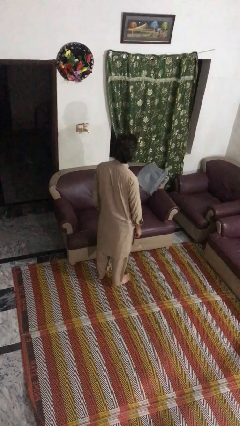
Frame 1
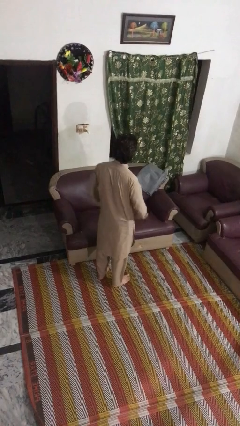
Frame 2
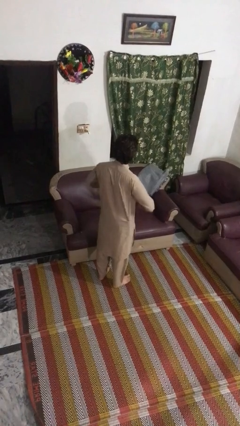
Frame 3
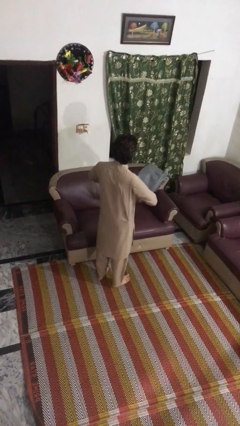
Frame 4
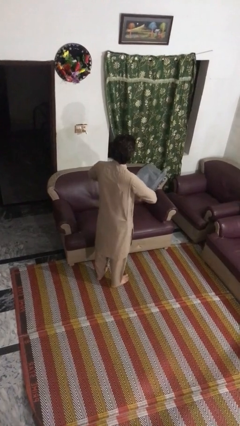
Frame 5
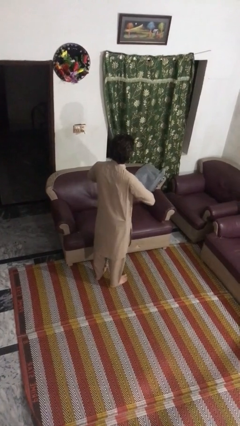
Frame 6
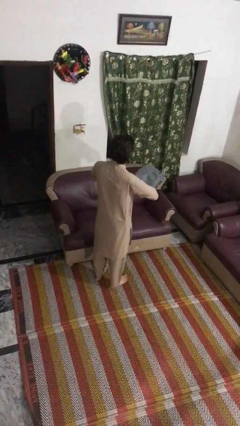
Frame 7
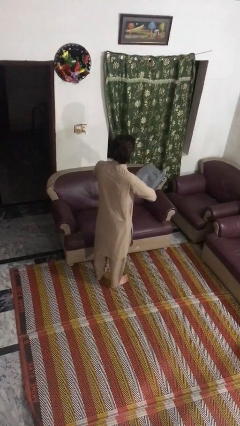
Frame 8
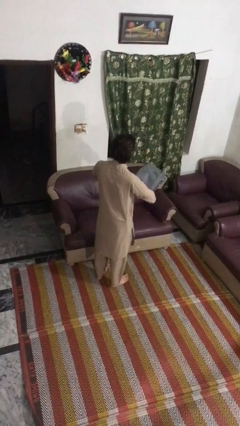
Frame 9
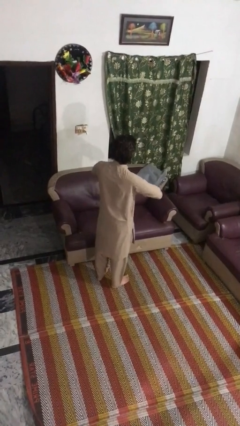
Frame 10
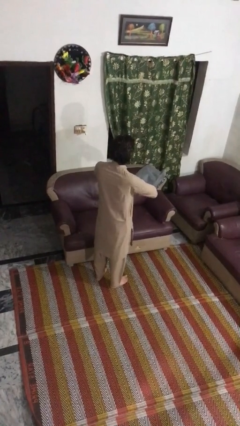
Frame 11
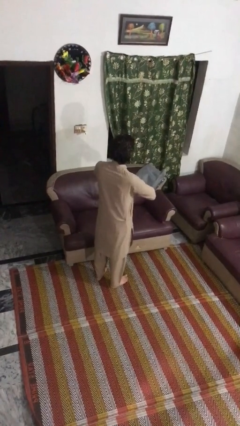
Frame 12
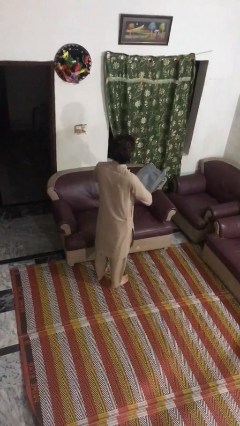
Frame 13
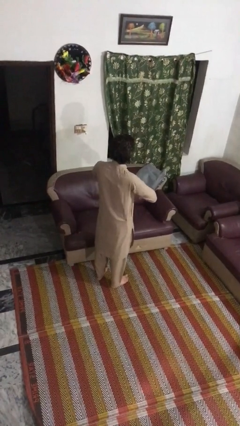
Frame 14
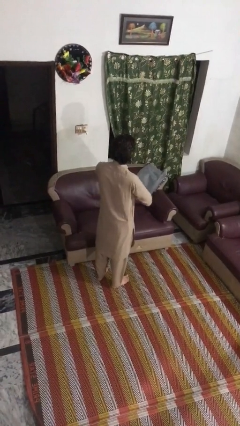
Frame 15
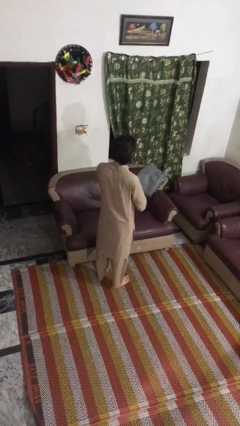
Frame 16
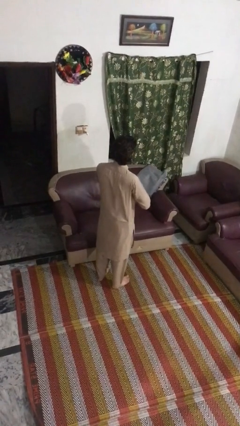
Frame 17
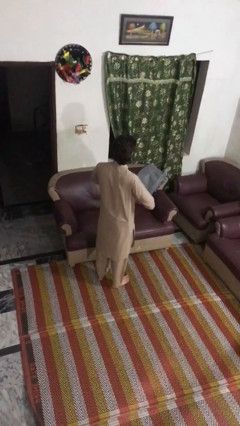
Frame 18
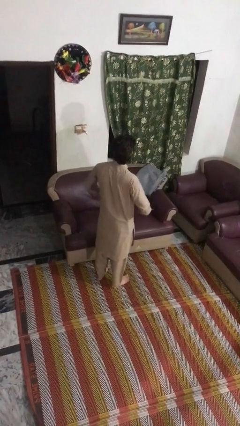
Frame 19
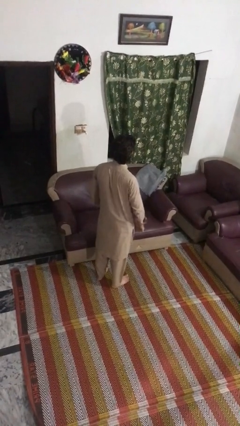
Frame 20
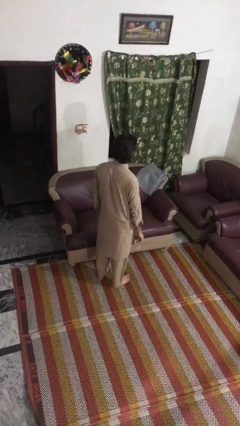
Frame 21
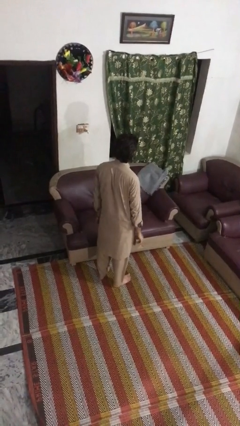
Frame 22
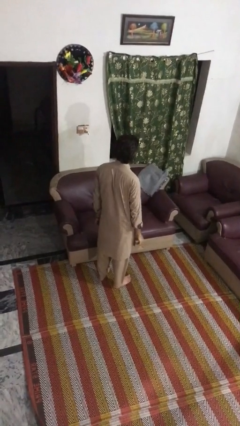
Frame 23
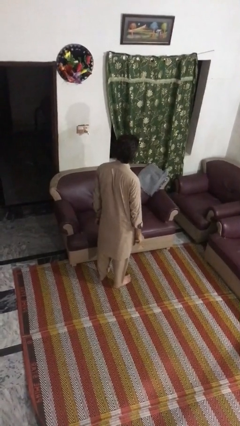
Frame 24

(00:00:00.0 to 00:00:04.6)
person cracks knuckles

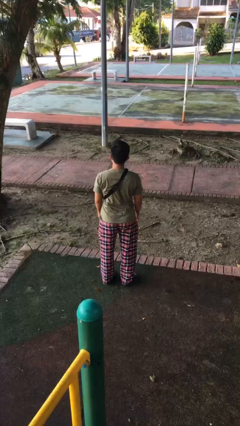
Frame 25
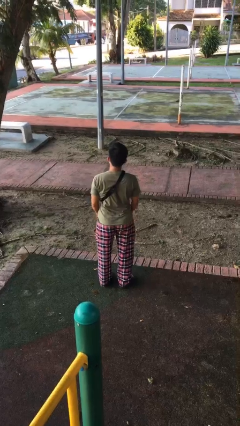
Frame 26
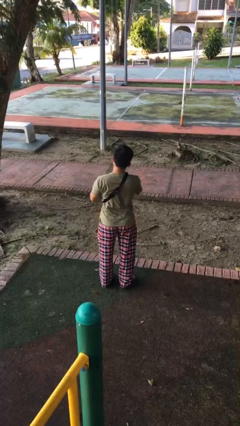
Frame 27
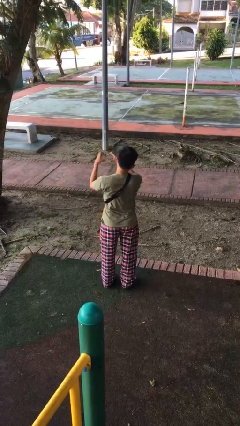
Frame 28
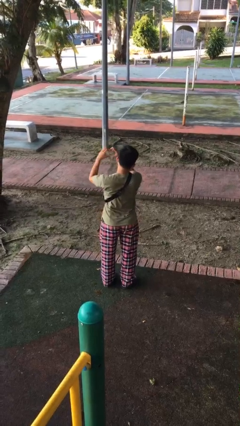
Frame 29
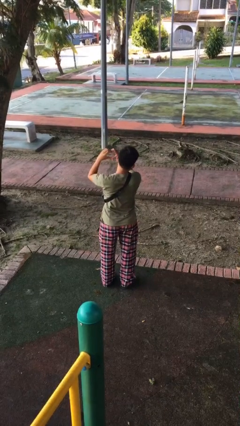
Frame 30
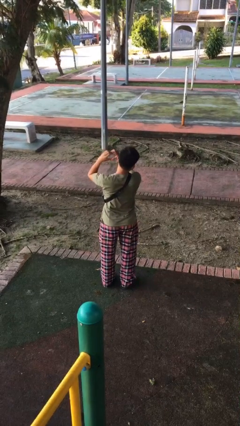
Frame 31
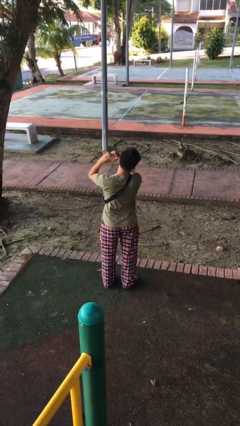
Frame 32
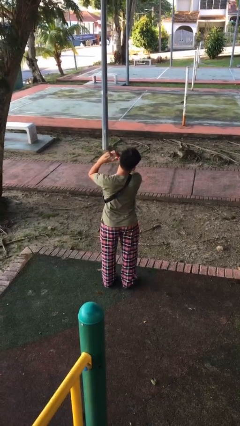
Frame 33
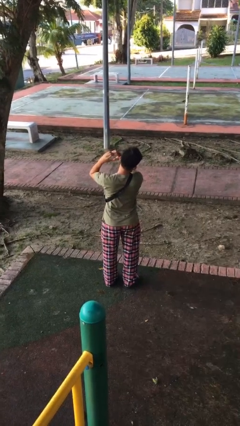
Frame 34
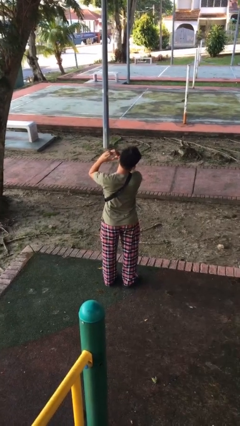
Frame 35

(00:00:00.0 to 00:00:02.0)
person gestures heart

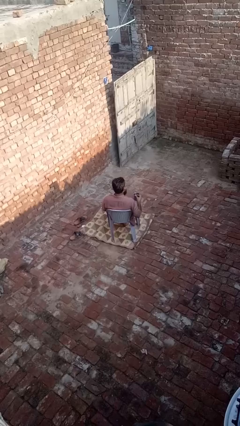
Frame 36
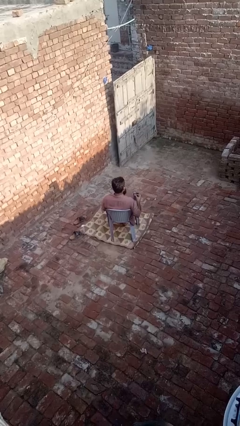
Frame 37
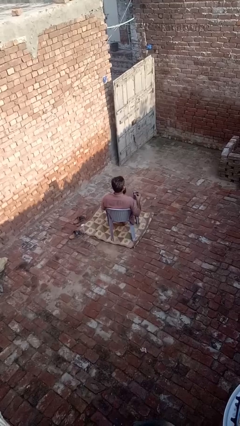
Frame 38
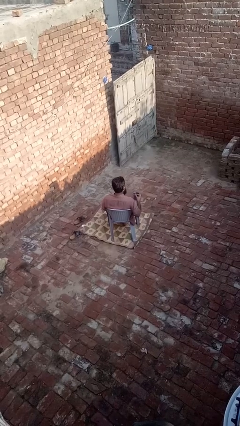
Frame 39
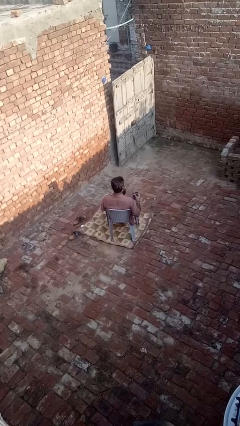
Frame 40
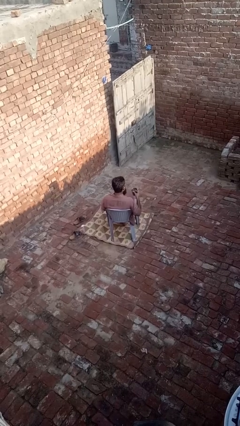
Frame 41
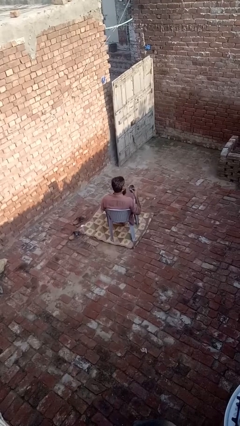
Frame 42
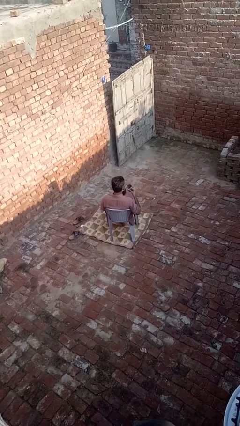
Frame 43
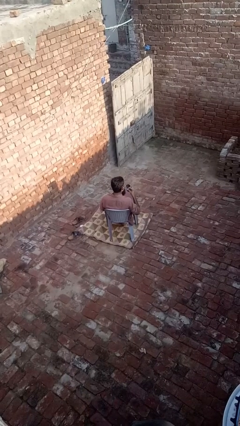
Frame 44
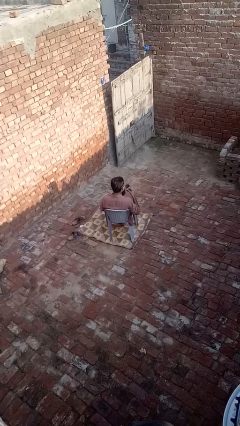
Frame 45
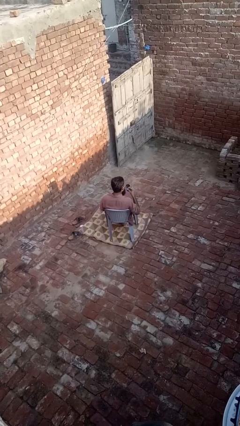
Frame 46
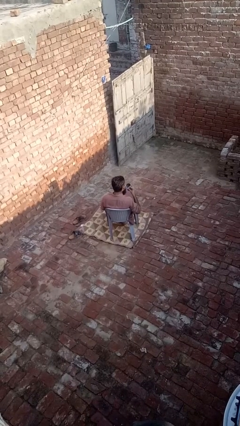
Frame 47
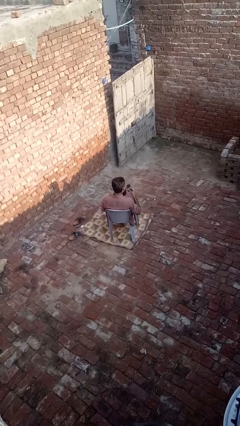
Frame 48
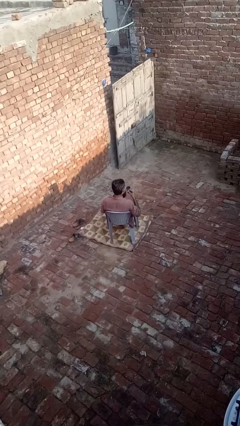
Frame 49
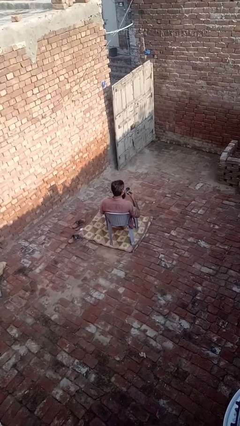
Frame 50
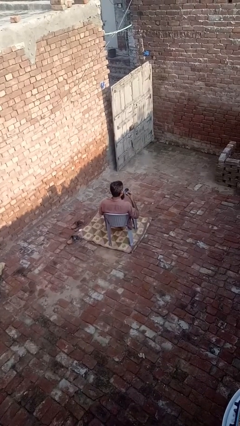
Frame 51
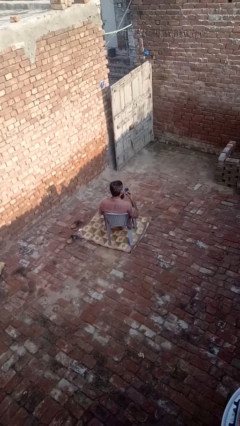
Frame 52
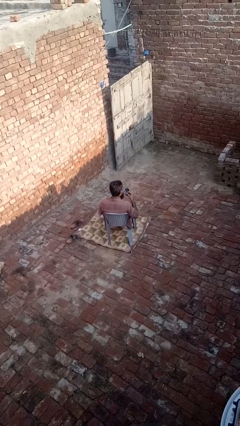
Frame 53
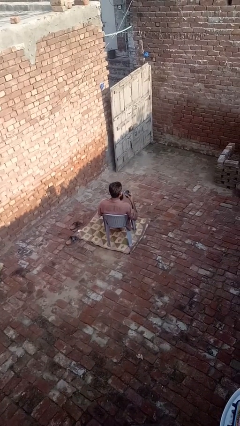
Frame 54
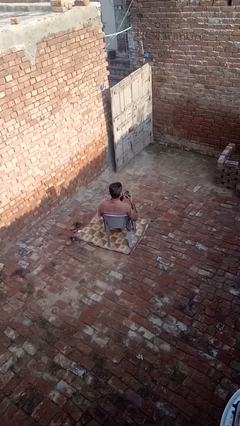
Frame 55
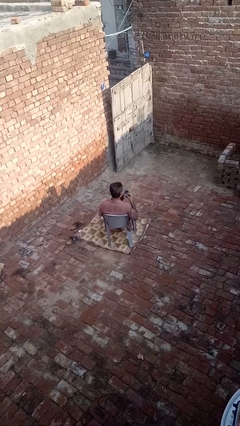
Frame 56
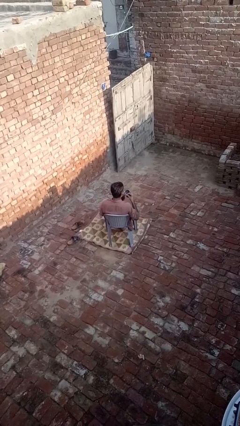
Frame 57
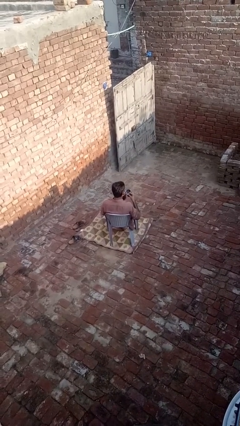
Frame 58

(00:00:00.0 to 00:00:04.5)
person drinks from straw

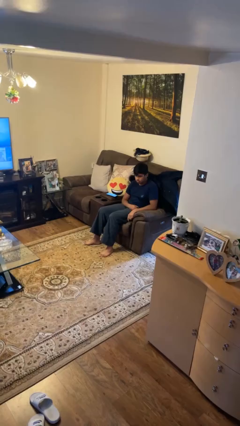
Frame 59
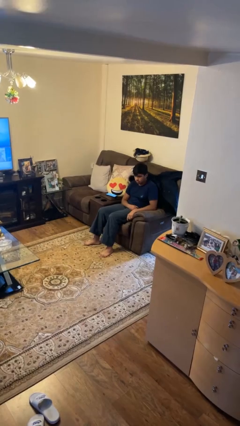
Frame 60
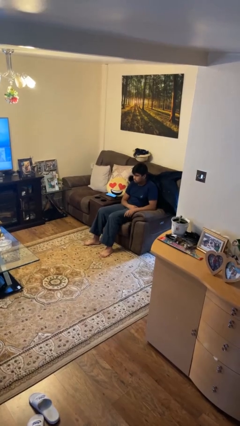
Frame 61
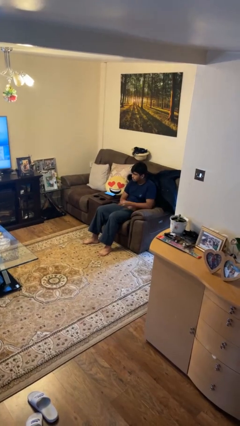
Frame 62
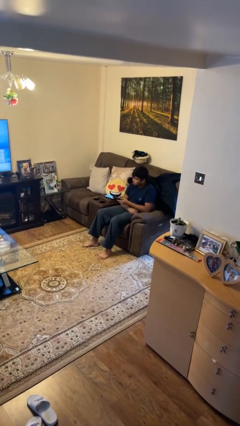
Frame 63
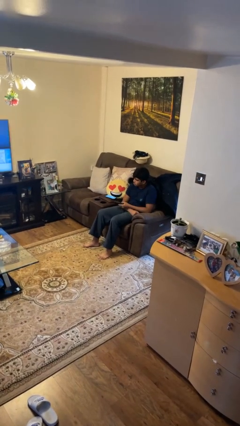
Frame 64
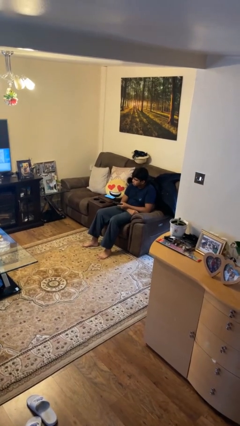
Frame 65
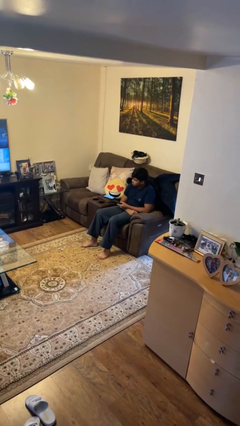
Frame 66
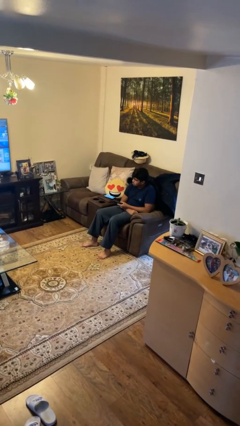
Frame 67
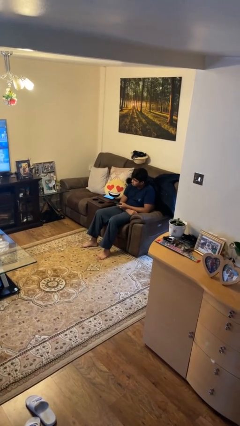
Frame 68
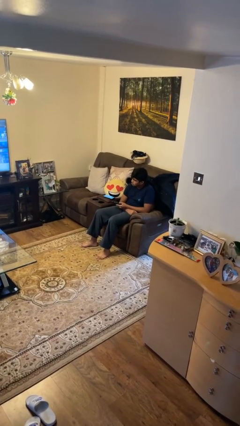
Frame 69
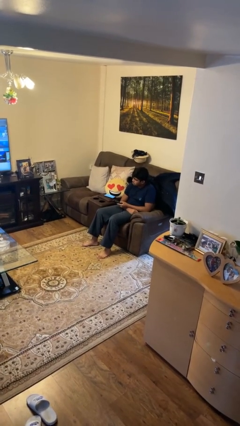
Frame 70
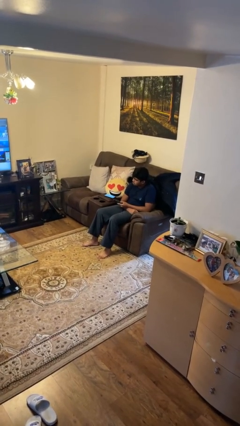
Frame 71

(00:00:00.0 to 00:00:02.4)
person uses television remote

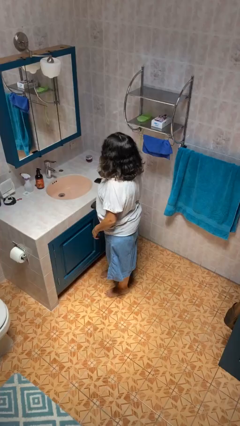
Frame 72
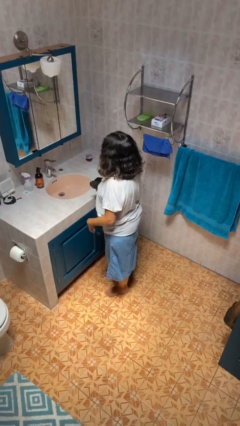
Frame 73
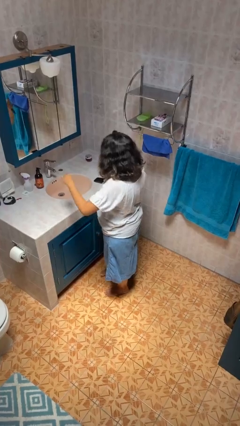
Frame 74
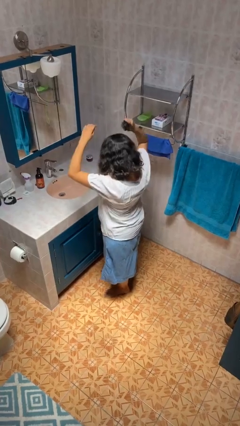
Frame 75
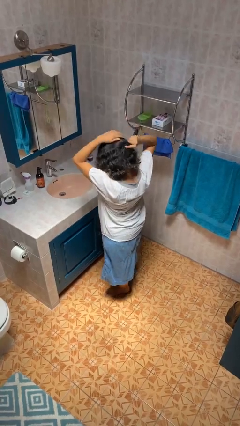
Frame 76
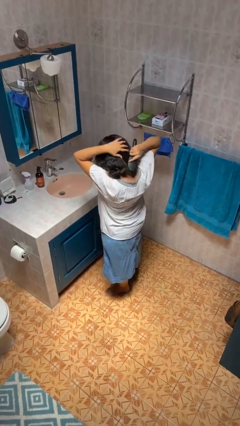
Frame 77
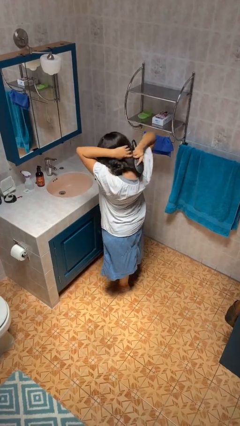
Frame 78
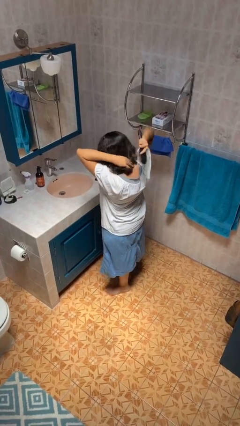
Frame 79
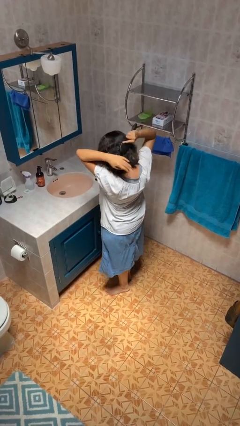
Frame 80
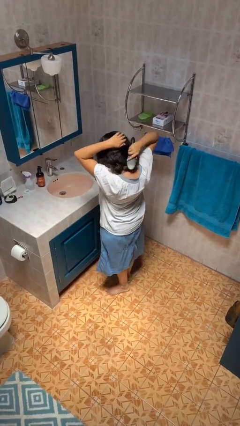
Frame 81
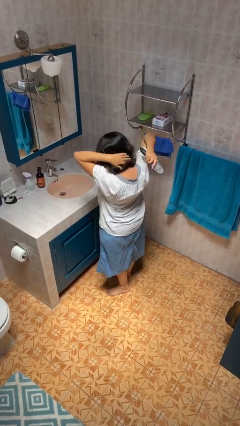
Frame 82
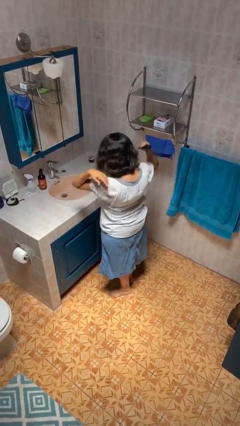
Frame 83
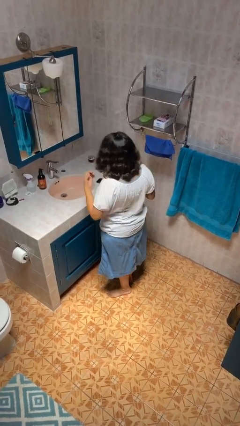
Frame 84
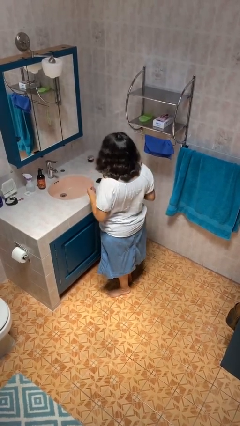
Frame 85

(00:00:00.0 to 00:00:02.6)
person brushes hair

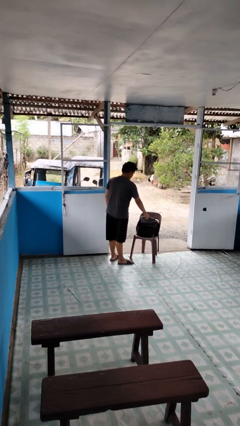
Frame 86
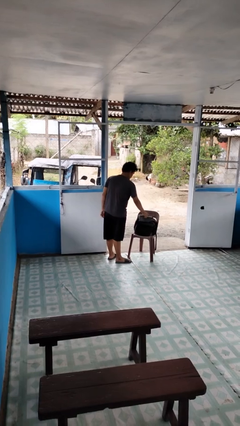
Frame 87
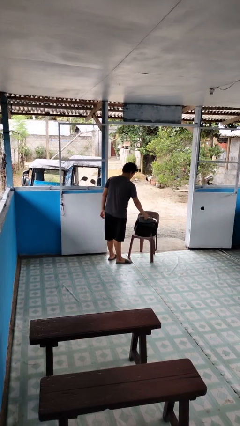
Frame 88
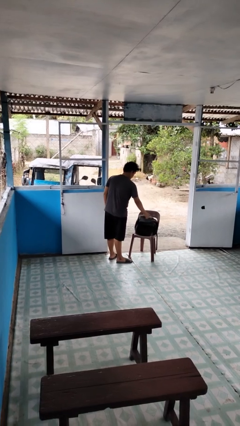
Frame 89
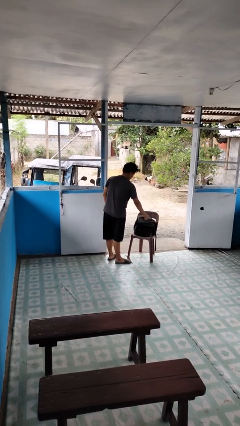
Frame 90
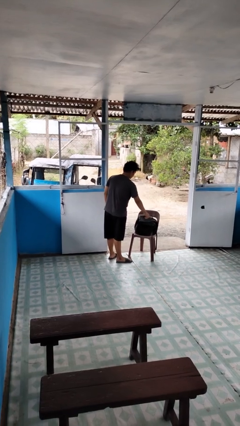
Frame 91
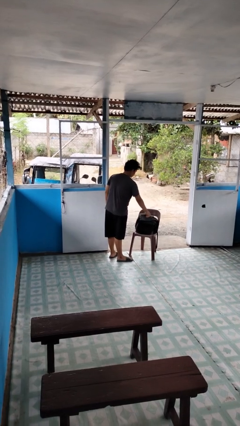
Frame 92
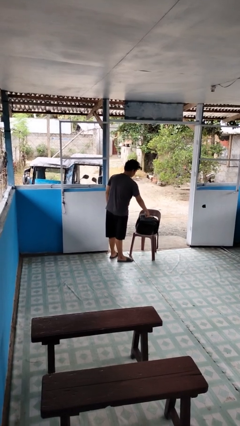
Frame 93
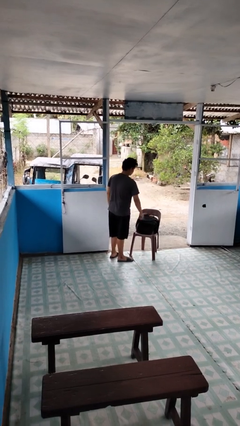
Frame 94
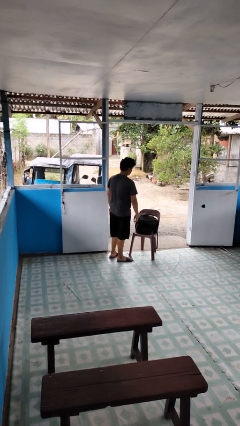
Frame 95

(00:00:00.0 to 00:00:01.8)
person taps object with finger

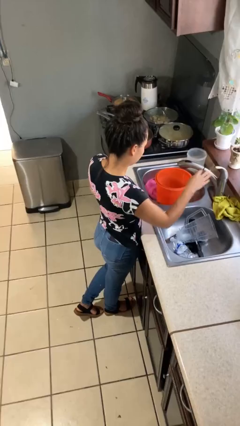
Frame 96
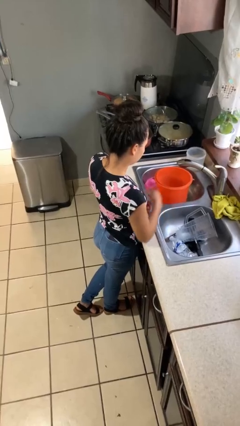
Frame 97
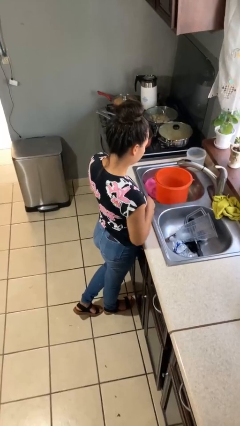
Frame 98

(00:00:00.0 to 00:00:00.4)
person turns off faucet
